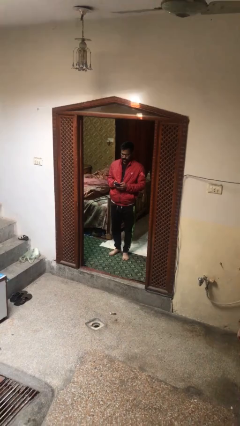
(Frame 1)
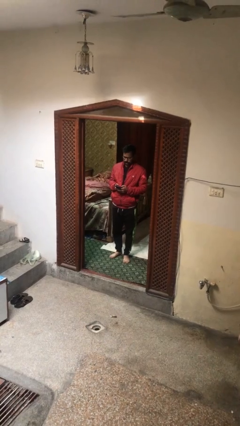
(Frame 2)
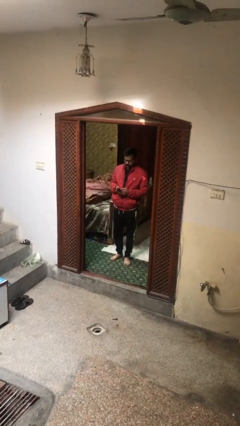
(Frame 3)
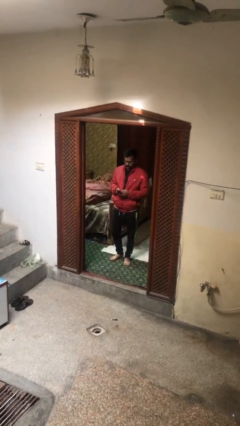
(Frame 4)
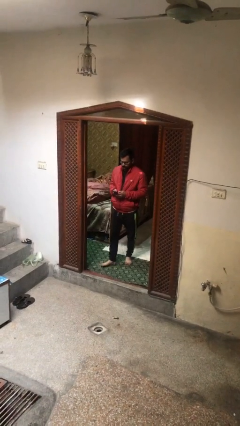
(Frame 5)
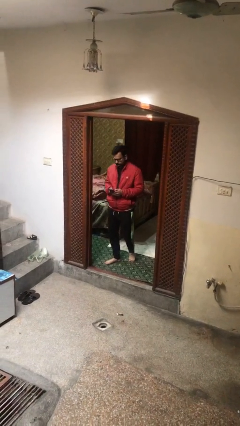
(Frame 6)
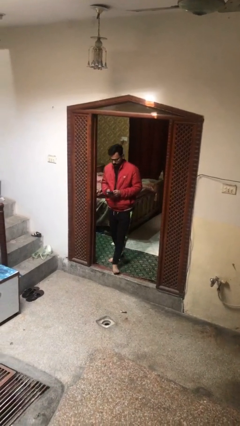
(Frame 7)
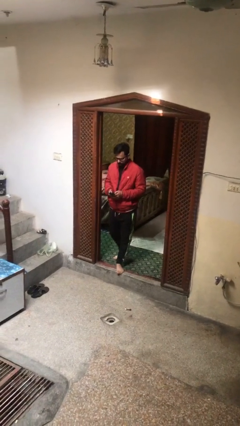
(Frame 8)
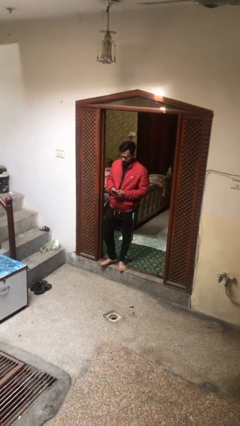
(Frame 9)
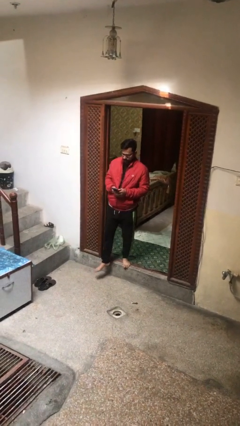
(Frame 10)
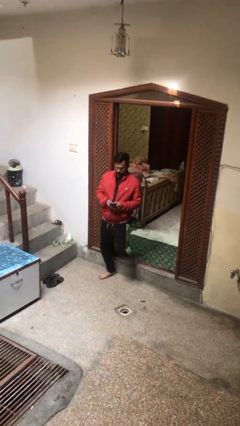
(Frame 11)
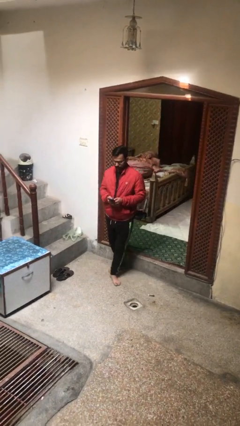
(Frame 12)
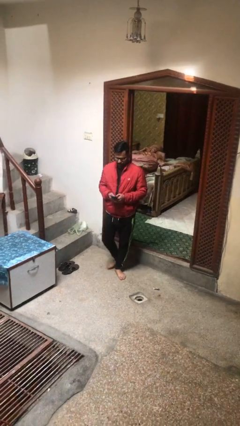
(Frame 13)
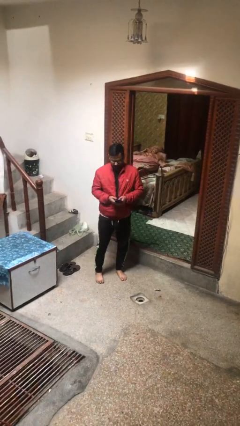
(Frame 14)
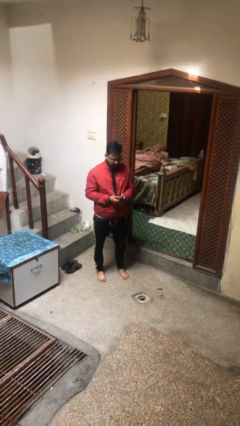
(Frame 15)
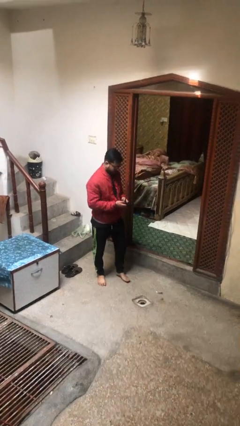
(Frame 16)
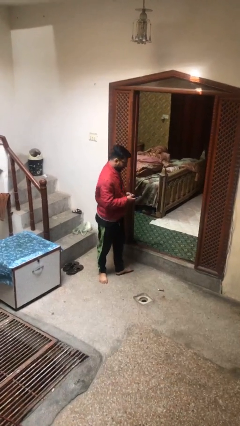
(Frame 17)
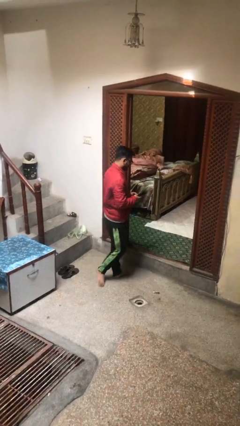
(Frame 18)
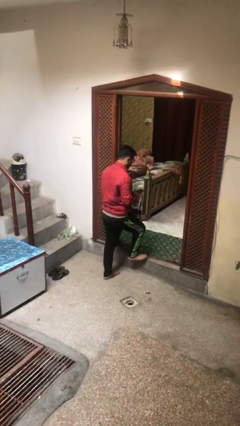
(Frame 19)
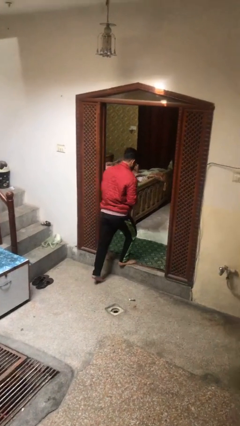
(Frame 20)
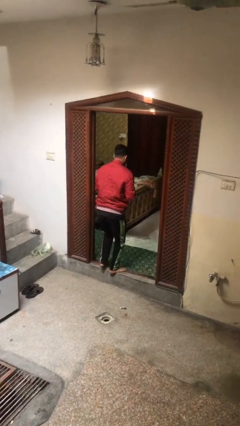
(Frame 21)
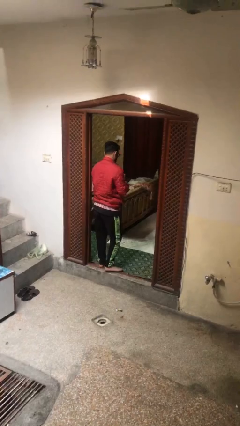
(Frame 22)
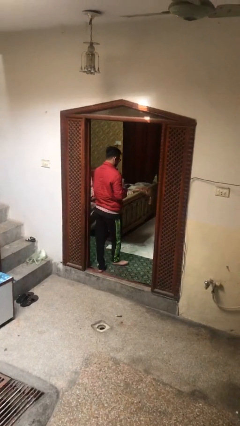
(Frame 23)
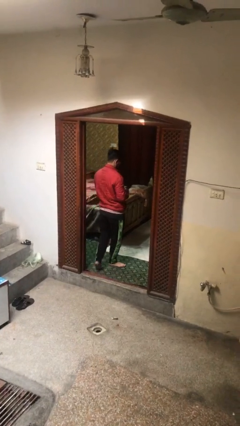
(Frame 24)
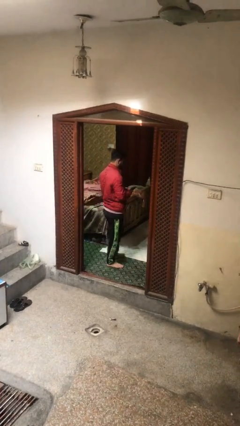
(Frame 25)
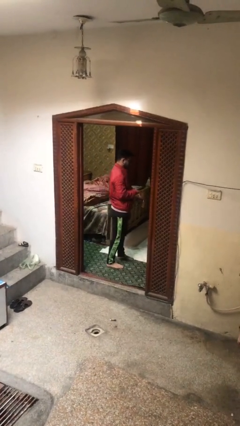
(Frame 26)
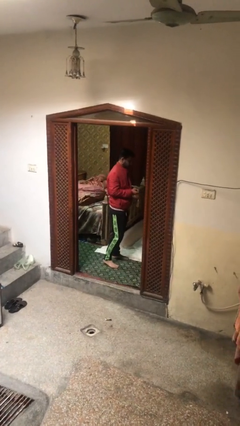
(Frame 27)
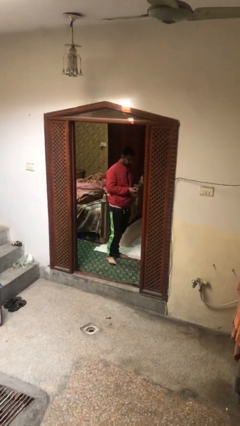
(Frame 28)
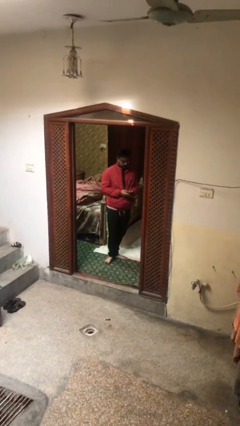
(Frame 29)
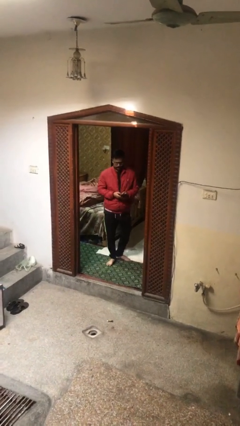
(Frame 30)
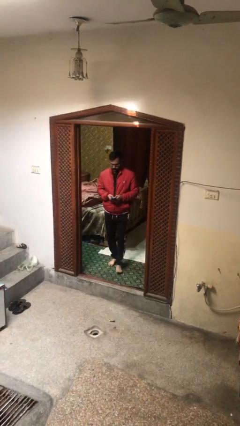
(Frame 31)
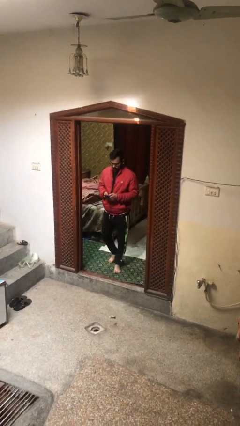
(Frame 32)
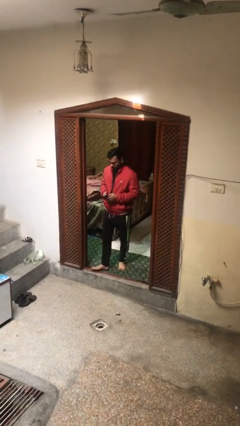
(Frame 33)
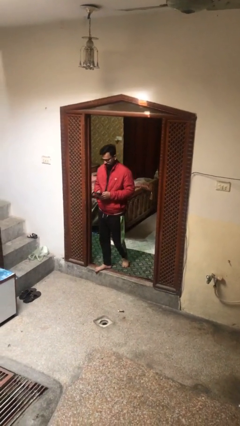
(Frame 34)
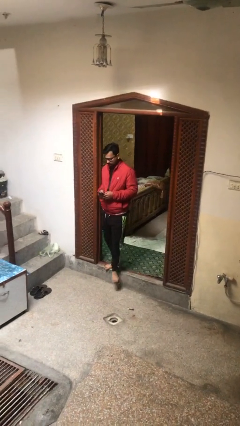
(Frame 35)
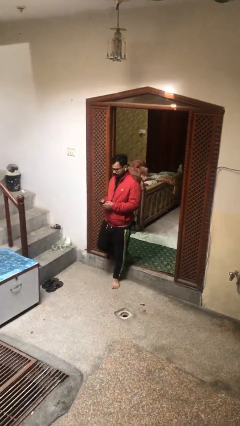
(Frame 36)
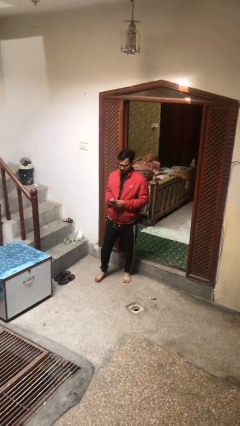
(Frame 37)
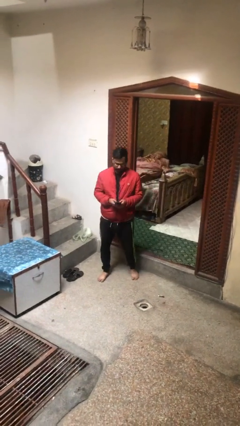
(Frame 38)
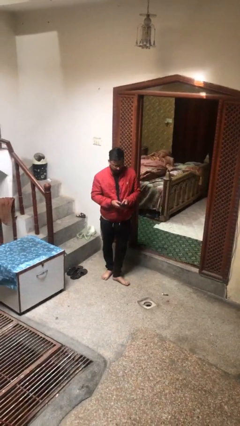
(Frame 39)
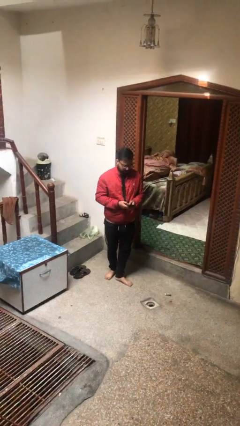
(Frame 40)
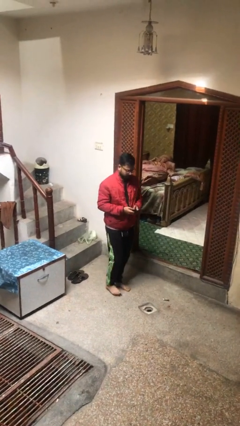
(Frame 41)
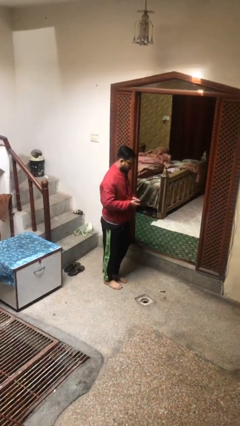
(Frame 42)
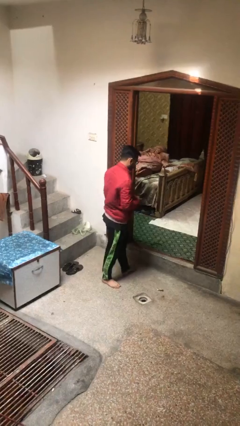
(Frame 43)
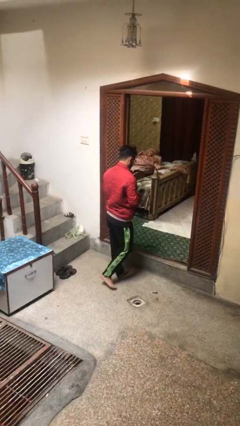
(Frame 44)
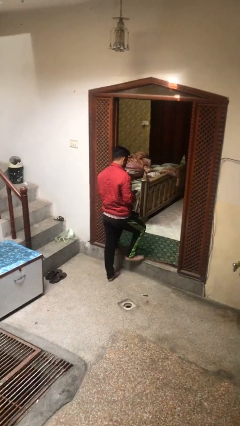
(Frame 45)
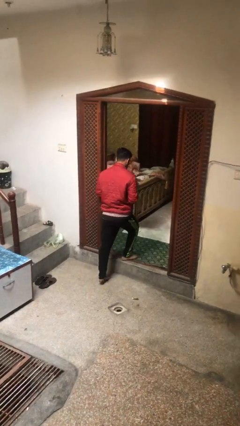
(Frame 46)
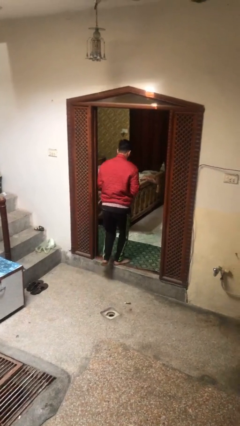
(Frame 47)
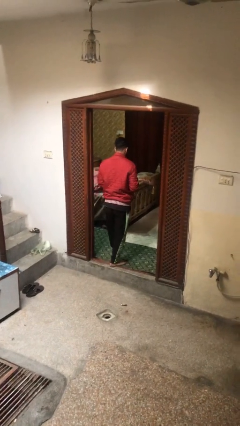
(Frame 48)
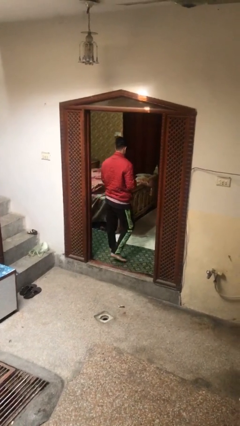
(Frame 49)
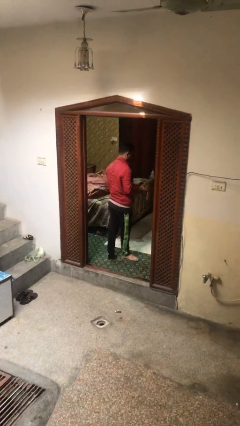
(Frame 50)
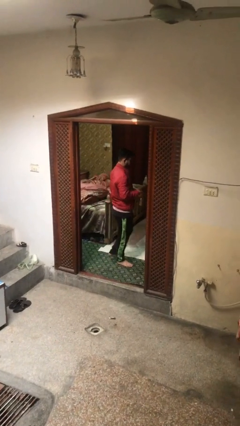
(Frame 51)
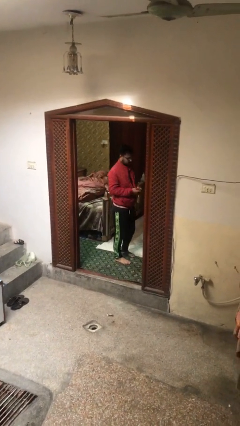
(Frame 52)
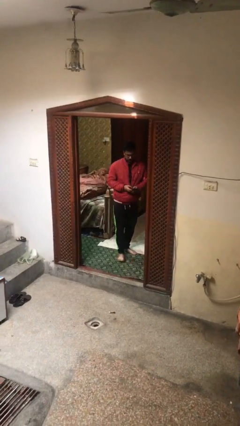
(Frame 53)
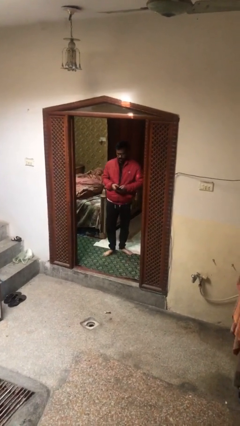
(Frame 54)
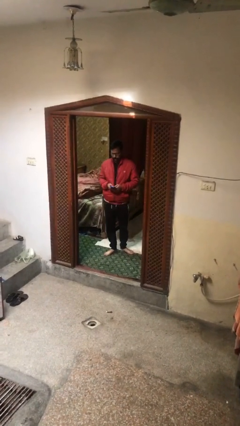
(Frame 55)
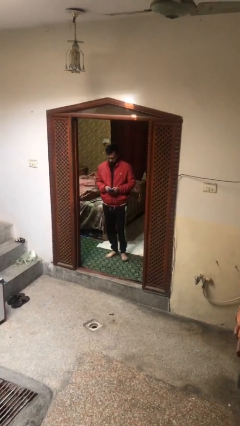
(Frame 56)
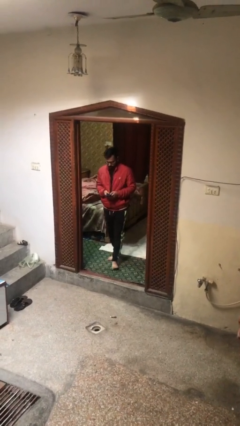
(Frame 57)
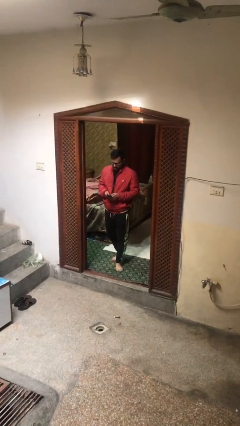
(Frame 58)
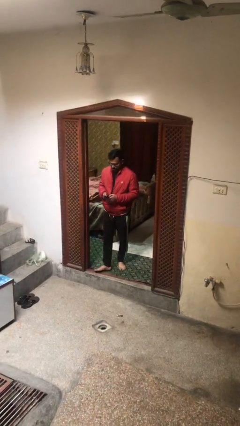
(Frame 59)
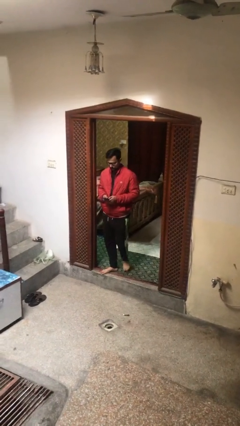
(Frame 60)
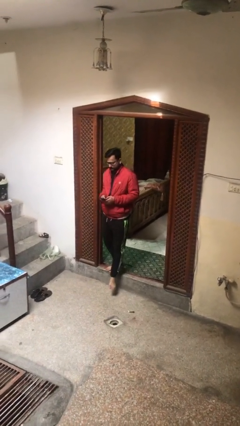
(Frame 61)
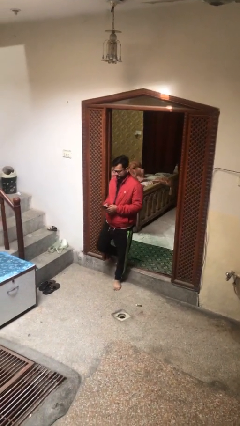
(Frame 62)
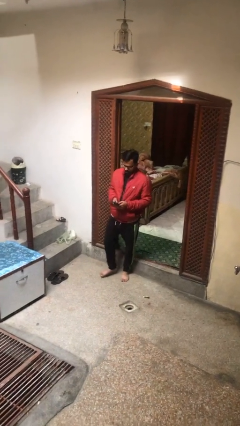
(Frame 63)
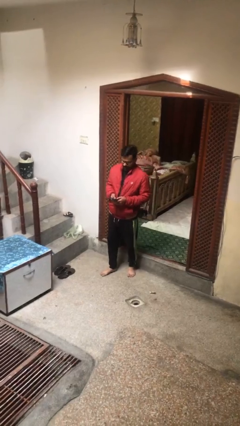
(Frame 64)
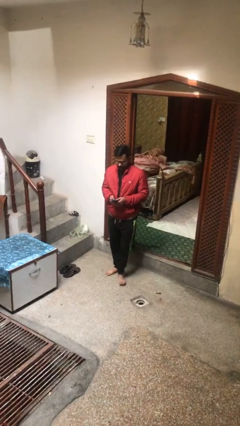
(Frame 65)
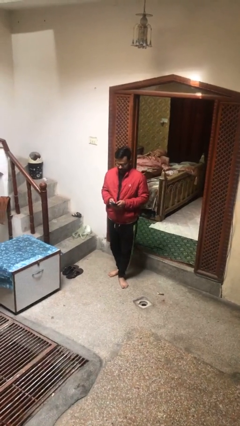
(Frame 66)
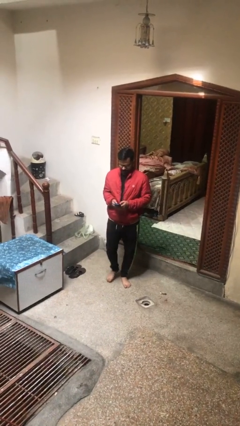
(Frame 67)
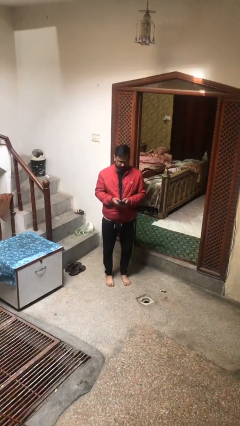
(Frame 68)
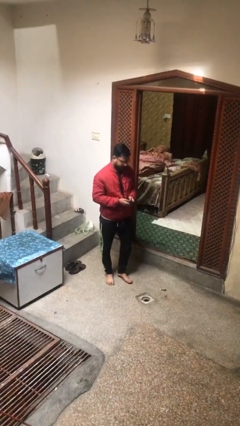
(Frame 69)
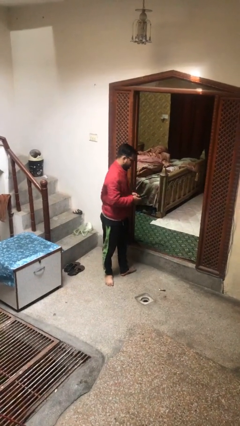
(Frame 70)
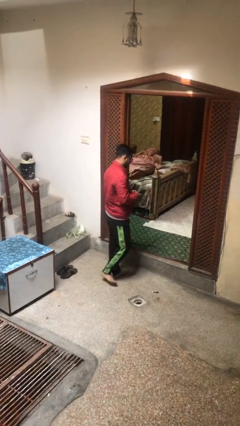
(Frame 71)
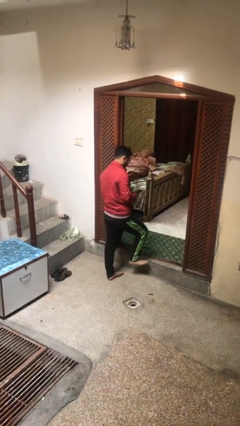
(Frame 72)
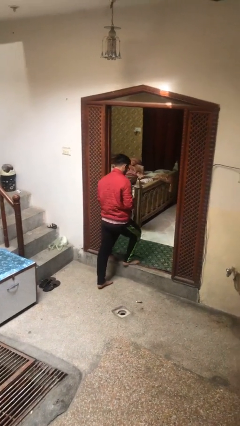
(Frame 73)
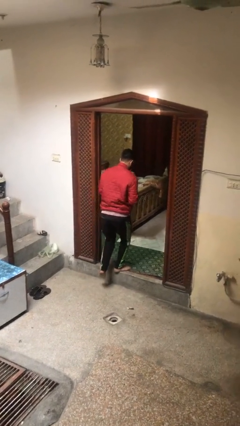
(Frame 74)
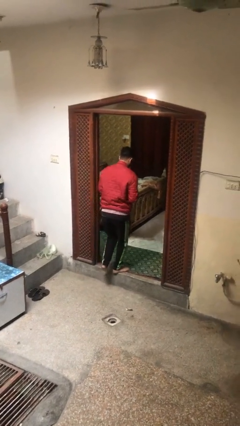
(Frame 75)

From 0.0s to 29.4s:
person texts on phone

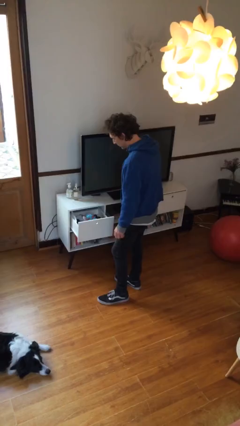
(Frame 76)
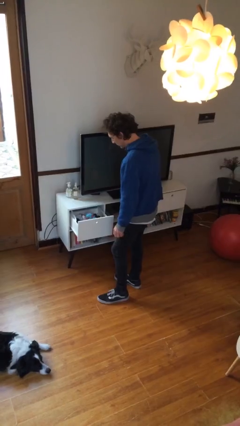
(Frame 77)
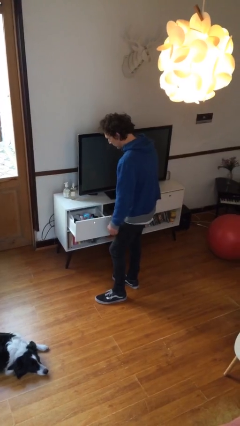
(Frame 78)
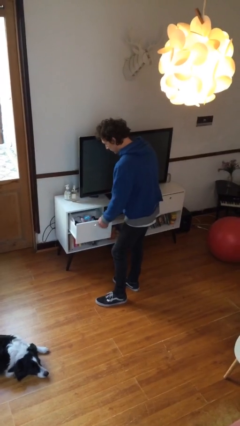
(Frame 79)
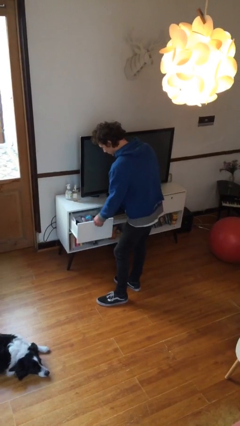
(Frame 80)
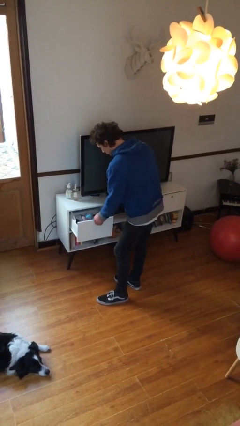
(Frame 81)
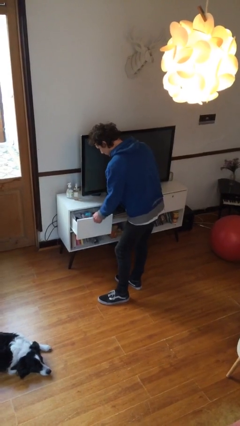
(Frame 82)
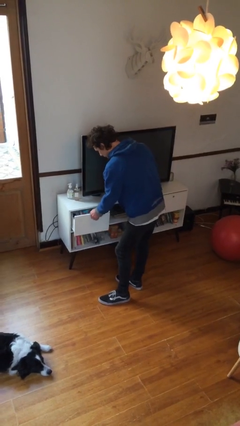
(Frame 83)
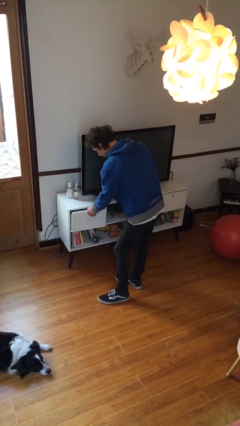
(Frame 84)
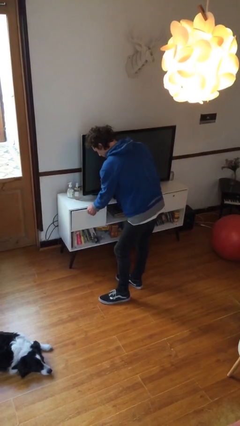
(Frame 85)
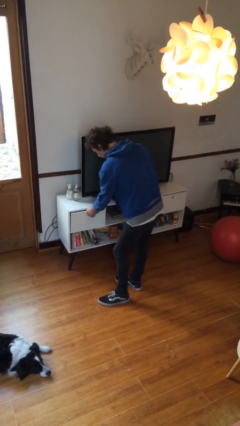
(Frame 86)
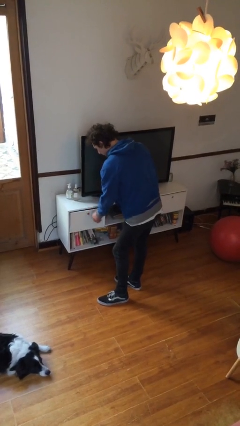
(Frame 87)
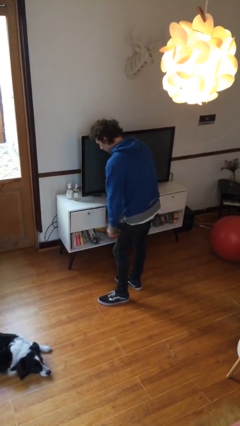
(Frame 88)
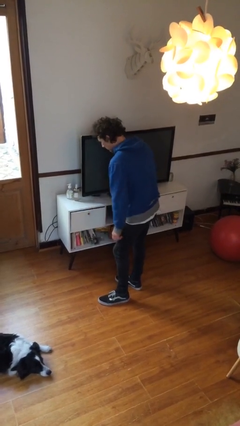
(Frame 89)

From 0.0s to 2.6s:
person closes dresser drawer

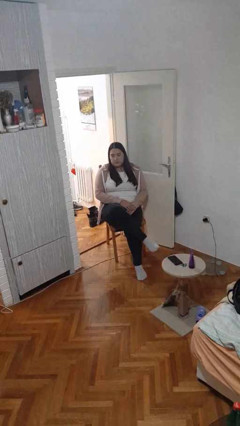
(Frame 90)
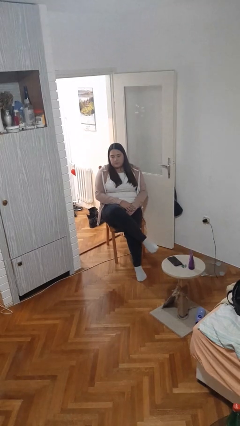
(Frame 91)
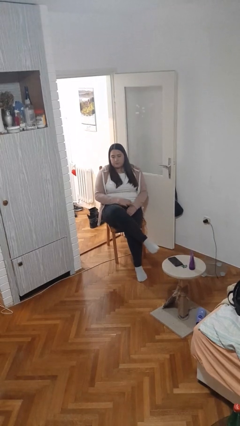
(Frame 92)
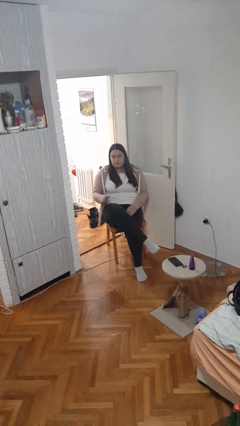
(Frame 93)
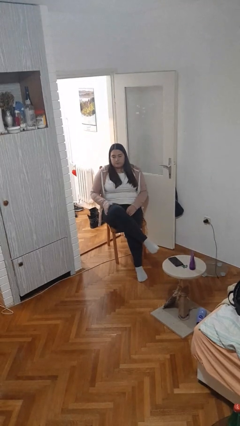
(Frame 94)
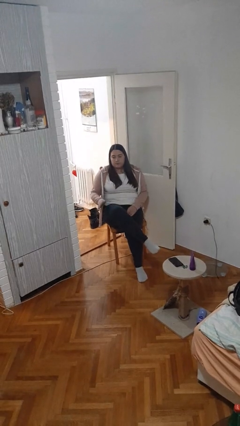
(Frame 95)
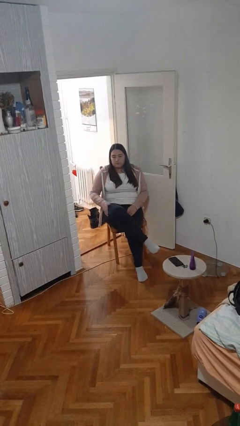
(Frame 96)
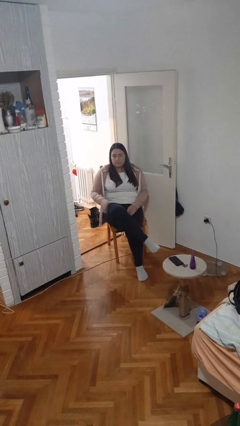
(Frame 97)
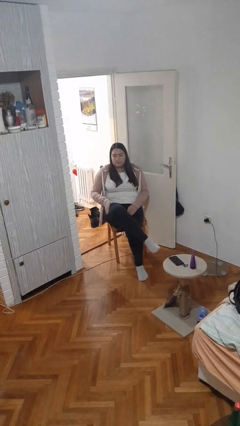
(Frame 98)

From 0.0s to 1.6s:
person slaps hands on thighs
